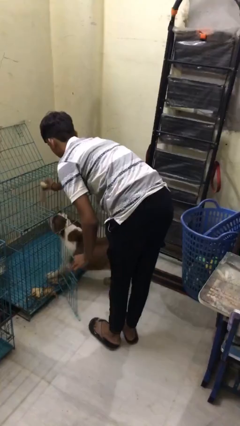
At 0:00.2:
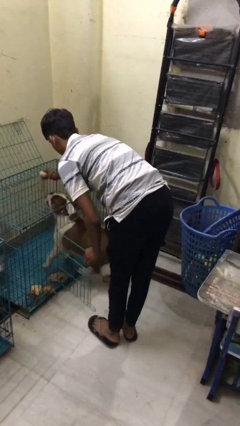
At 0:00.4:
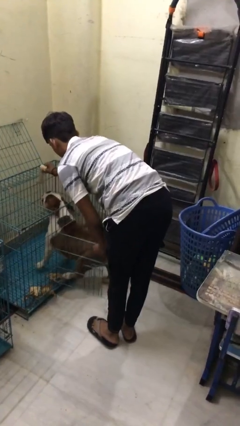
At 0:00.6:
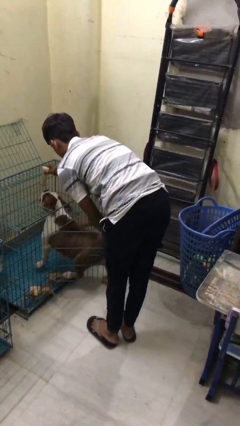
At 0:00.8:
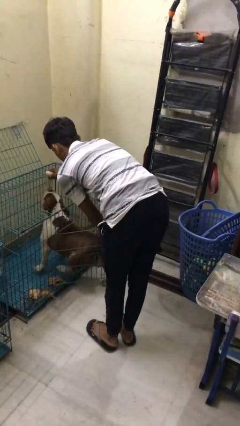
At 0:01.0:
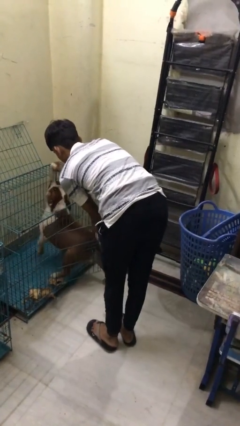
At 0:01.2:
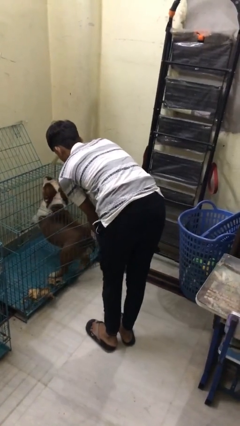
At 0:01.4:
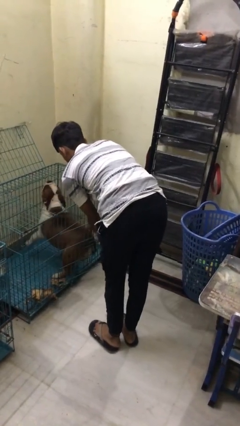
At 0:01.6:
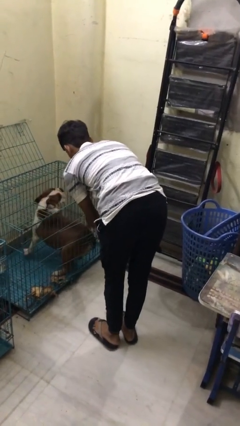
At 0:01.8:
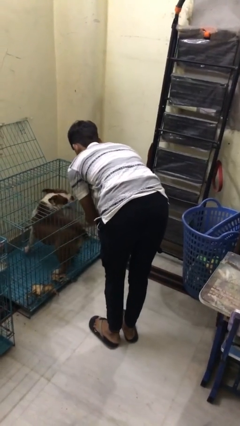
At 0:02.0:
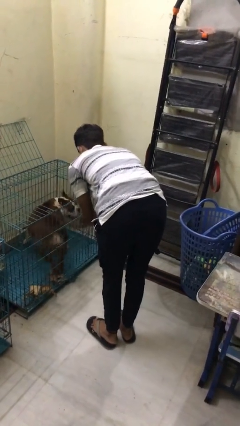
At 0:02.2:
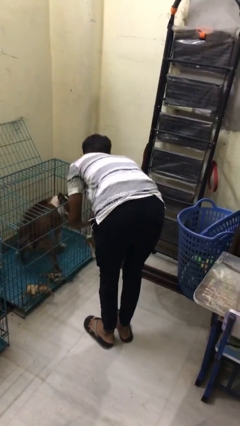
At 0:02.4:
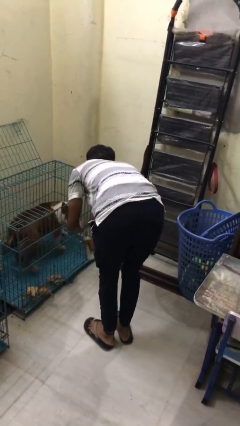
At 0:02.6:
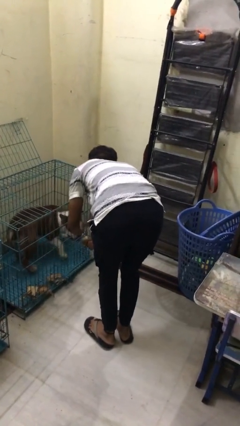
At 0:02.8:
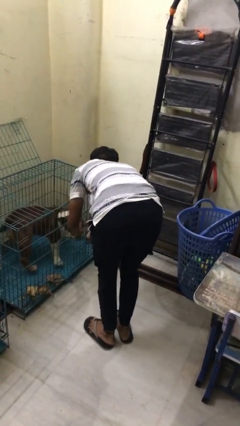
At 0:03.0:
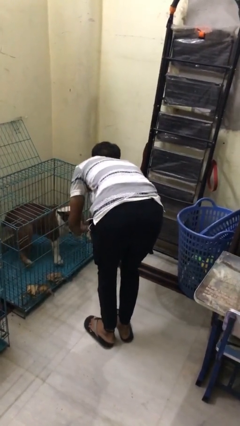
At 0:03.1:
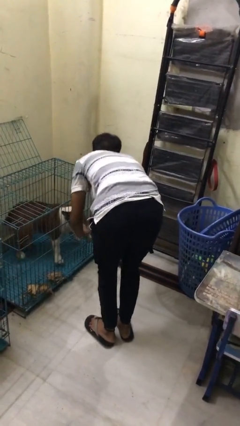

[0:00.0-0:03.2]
person crates dog

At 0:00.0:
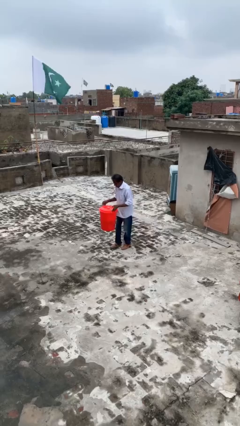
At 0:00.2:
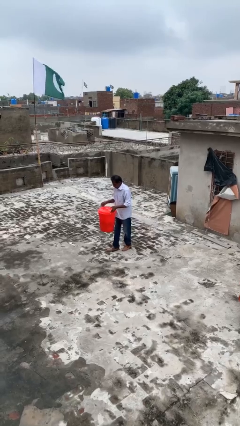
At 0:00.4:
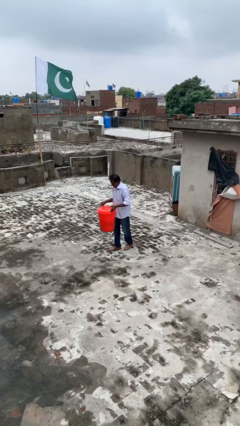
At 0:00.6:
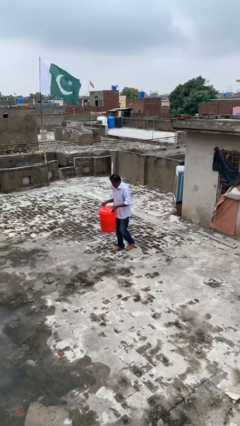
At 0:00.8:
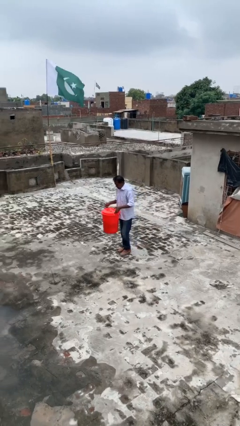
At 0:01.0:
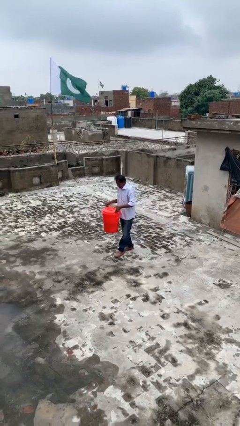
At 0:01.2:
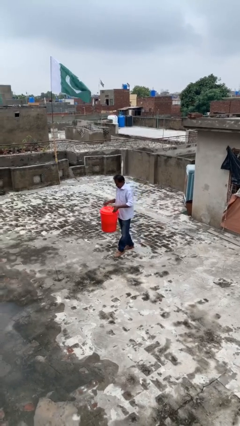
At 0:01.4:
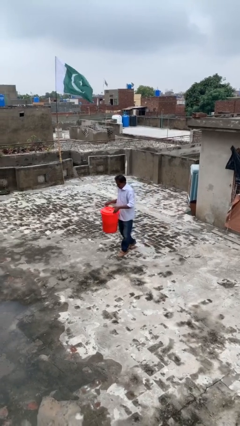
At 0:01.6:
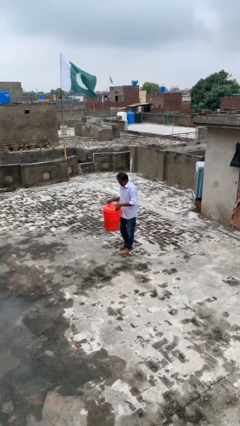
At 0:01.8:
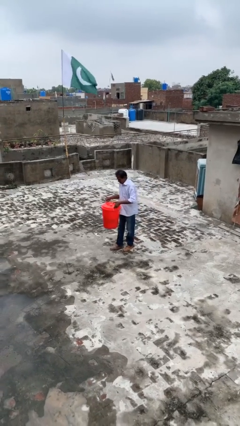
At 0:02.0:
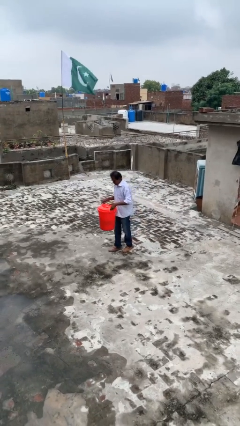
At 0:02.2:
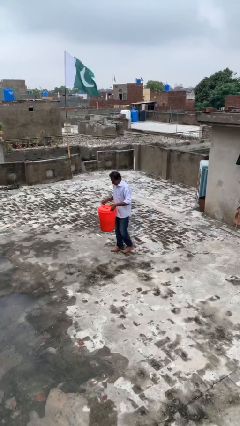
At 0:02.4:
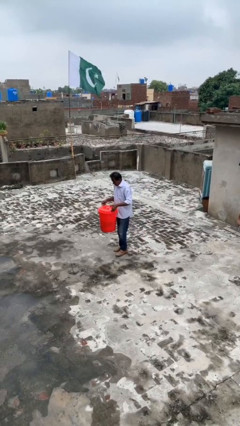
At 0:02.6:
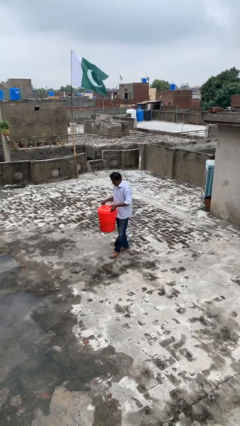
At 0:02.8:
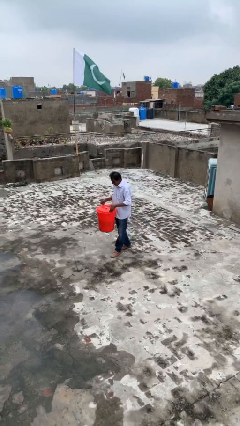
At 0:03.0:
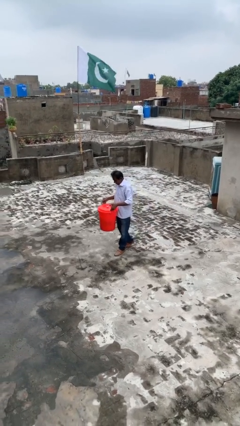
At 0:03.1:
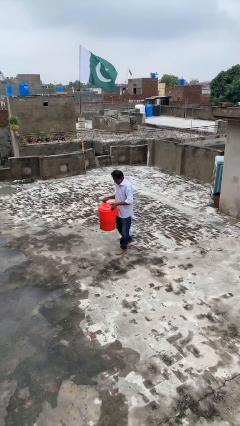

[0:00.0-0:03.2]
person carries heavy object

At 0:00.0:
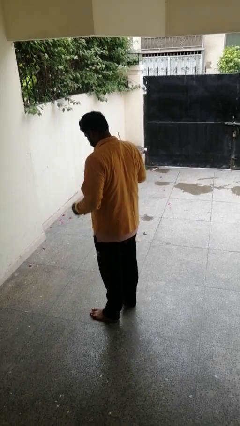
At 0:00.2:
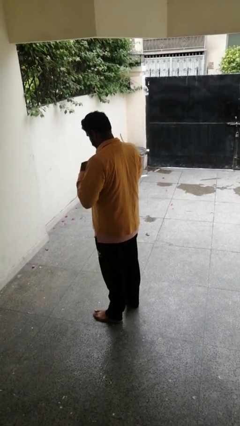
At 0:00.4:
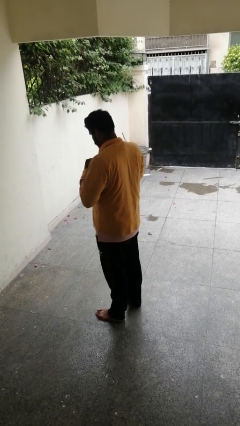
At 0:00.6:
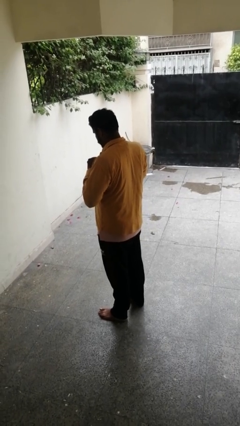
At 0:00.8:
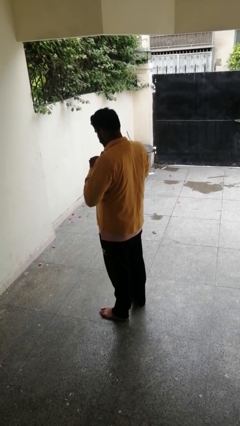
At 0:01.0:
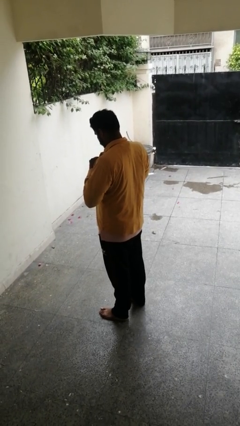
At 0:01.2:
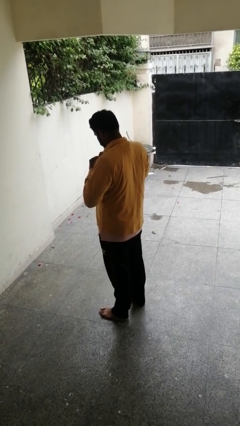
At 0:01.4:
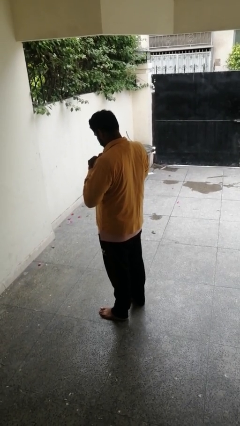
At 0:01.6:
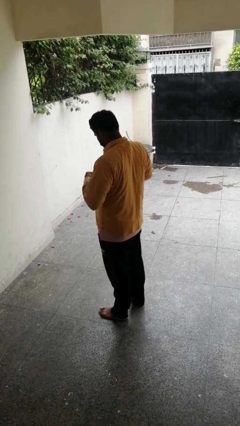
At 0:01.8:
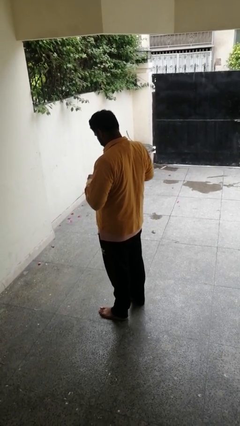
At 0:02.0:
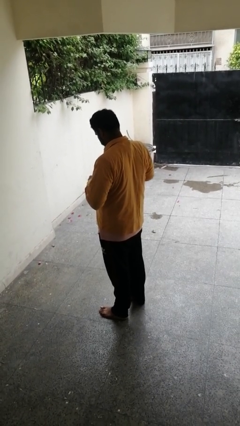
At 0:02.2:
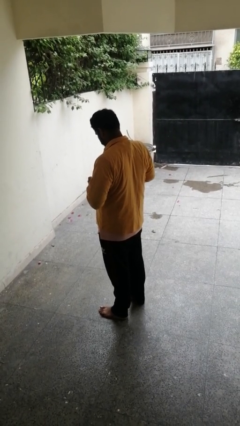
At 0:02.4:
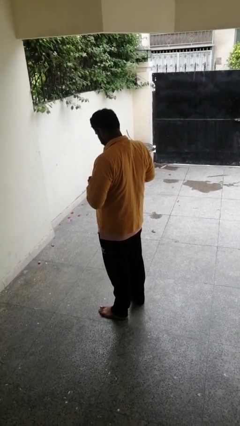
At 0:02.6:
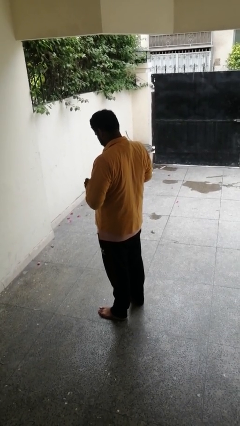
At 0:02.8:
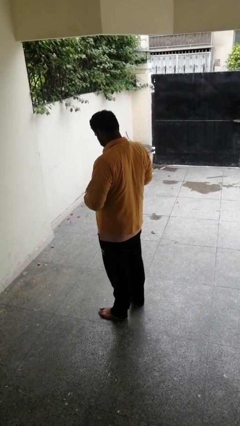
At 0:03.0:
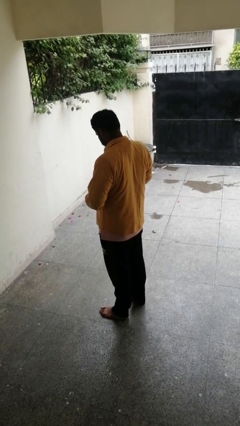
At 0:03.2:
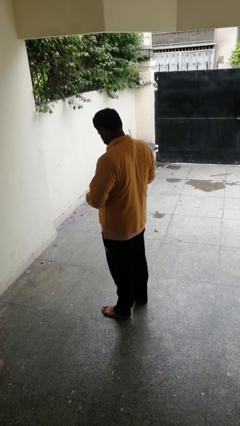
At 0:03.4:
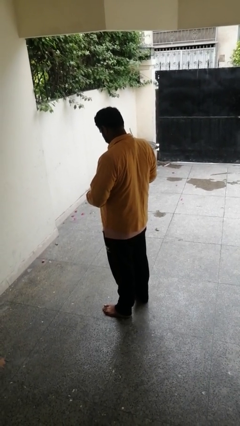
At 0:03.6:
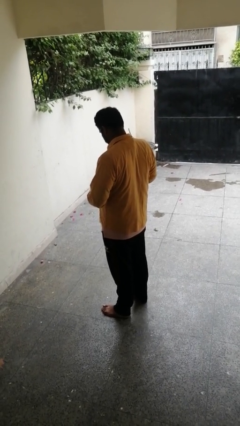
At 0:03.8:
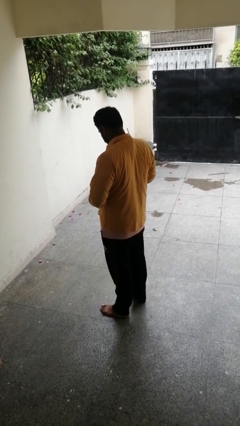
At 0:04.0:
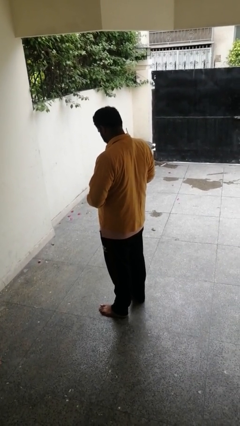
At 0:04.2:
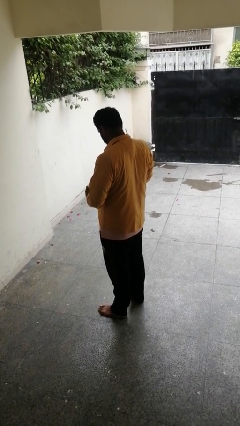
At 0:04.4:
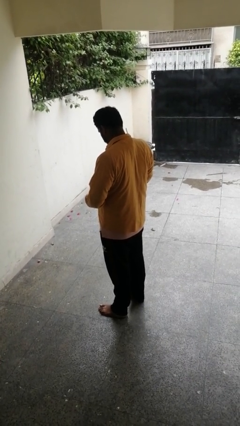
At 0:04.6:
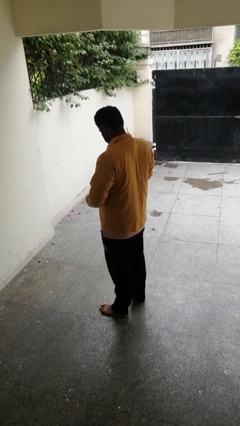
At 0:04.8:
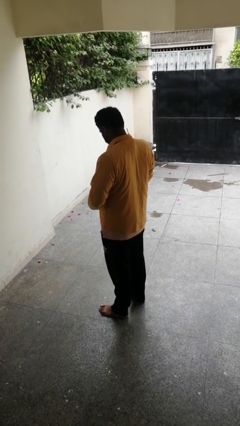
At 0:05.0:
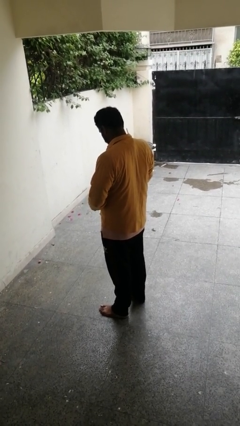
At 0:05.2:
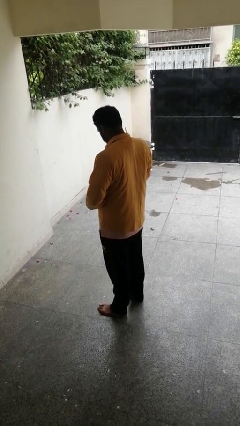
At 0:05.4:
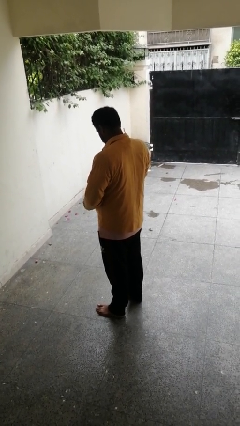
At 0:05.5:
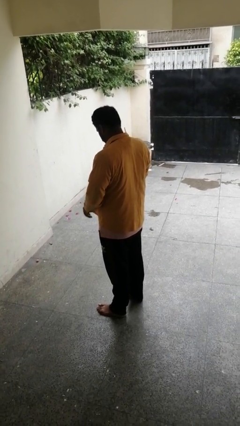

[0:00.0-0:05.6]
person unbuttons shirt

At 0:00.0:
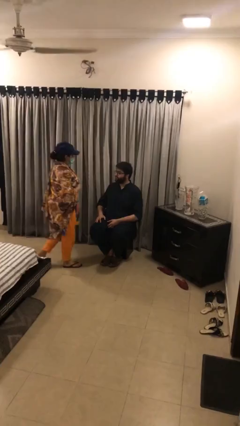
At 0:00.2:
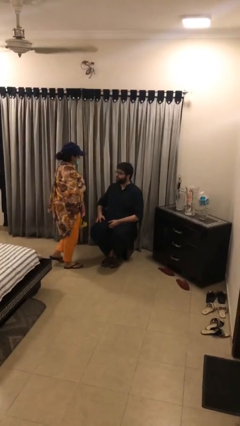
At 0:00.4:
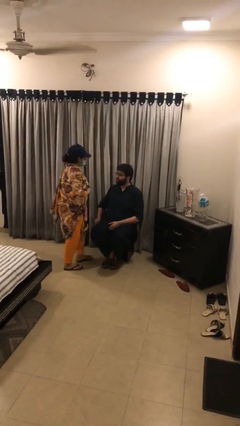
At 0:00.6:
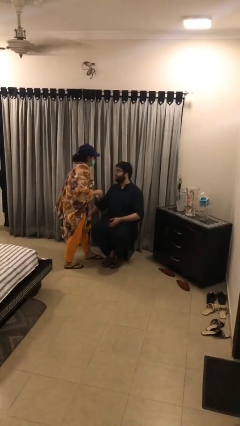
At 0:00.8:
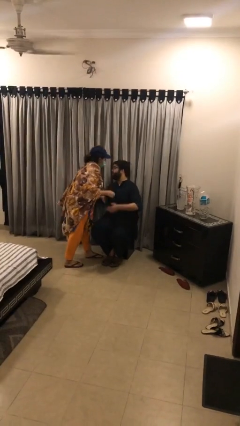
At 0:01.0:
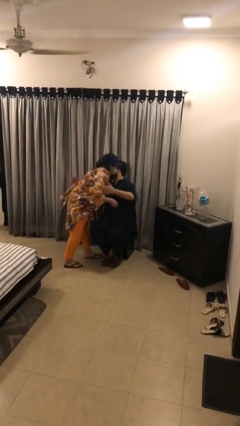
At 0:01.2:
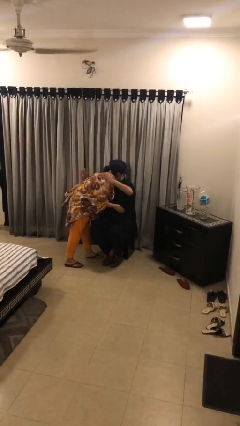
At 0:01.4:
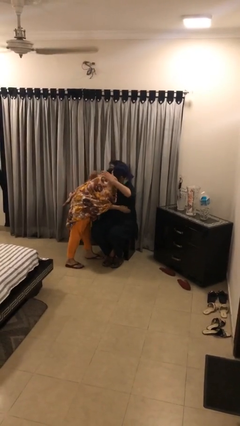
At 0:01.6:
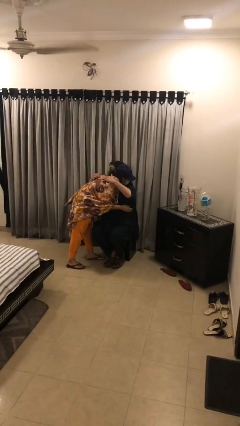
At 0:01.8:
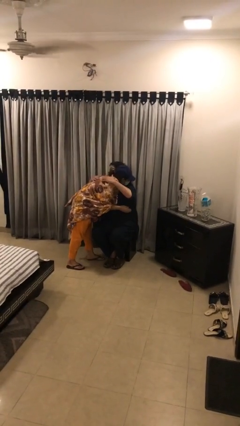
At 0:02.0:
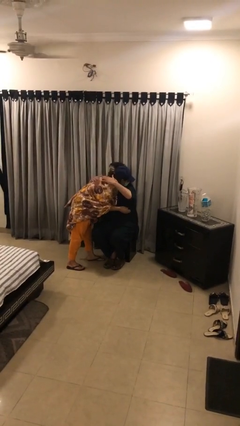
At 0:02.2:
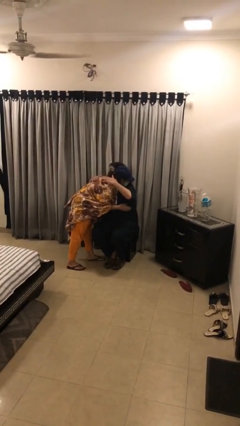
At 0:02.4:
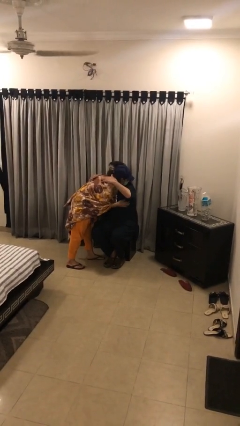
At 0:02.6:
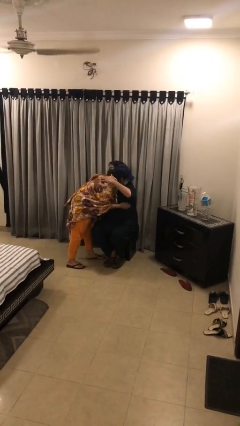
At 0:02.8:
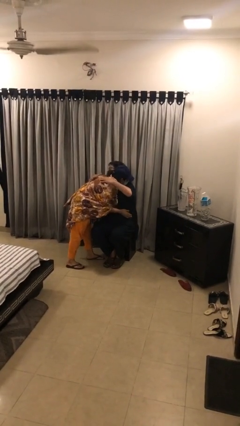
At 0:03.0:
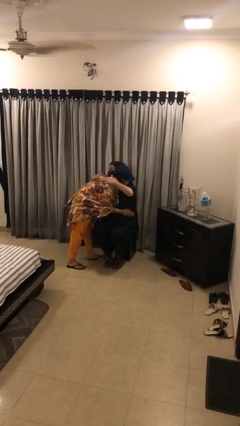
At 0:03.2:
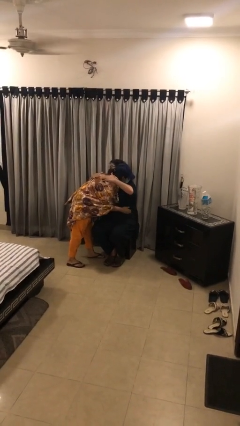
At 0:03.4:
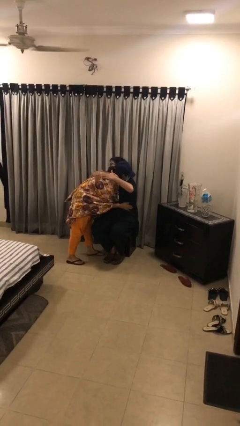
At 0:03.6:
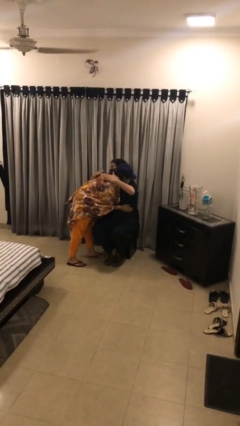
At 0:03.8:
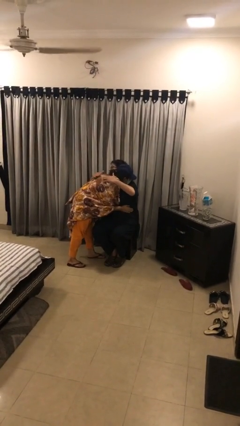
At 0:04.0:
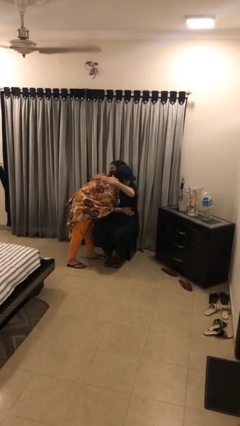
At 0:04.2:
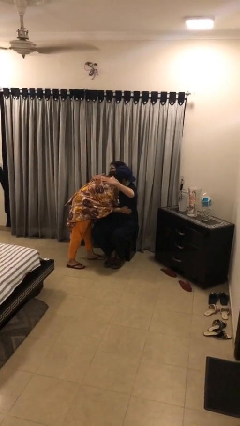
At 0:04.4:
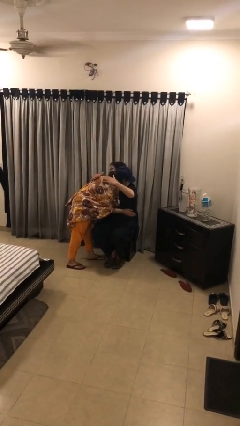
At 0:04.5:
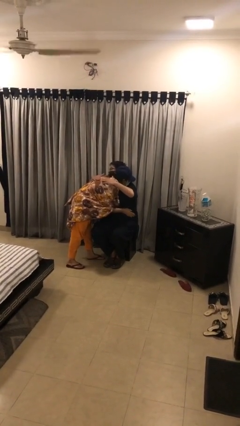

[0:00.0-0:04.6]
person embraces person

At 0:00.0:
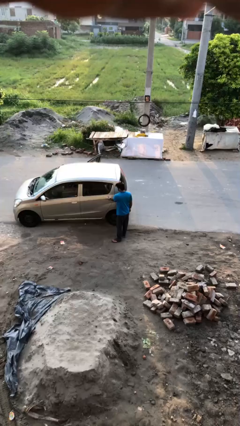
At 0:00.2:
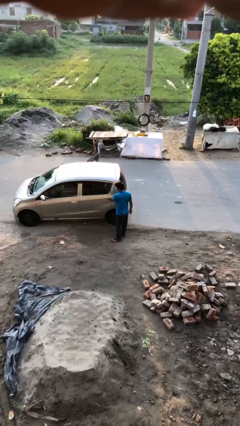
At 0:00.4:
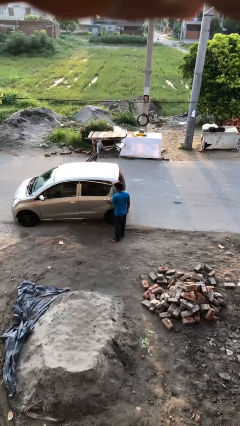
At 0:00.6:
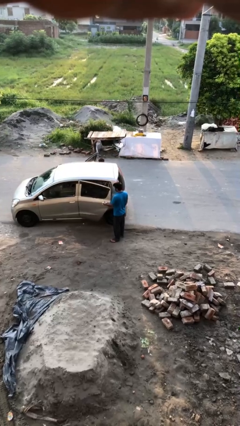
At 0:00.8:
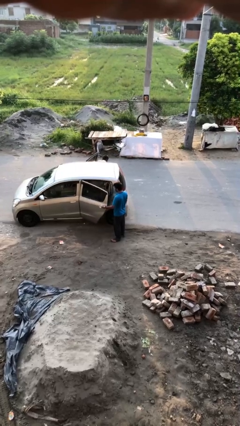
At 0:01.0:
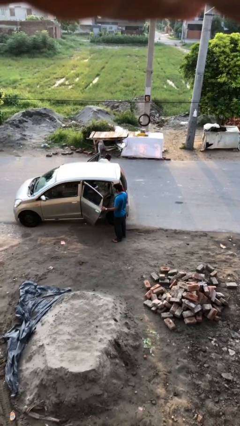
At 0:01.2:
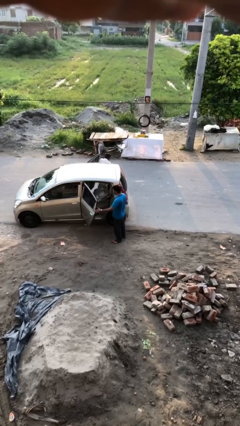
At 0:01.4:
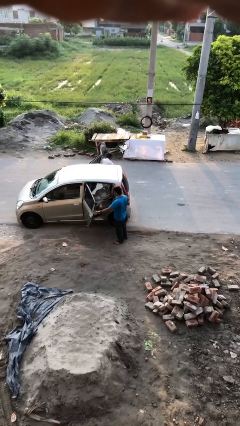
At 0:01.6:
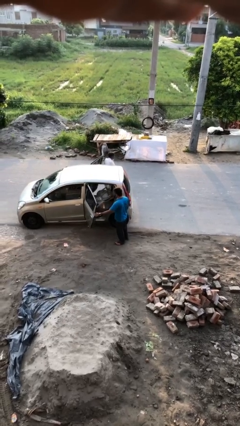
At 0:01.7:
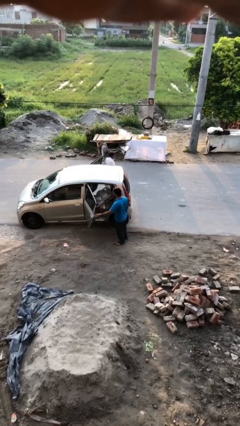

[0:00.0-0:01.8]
person opens car door
